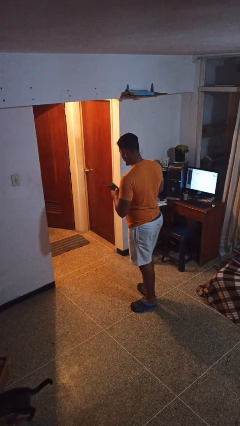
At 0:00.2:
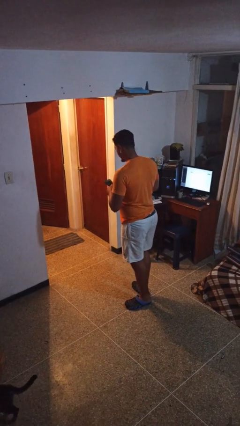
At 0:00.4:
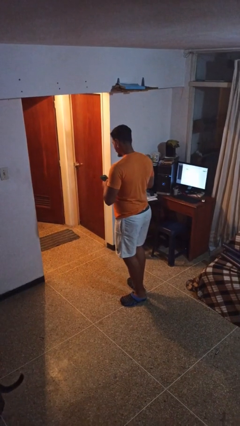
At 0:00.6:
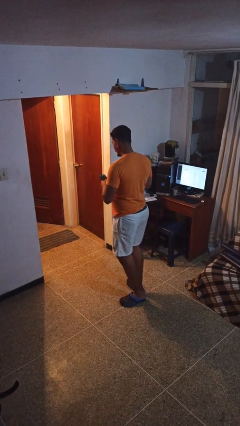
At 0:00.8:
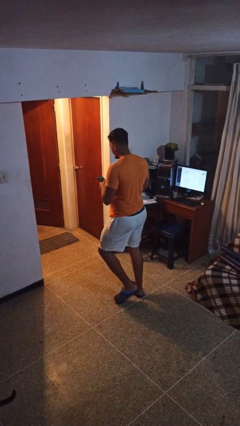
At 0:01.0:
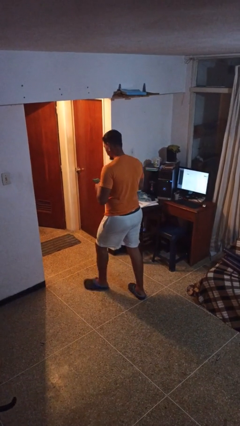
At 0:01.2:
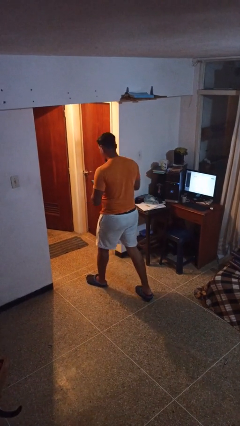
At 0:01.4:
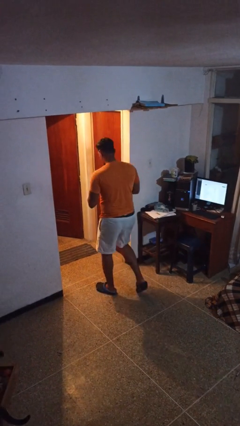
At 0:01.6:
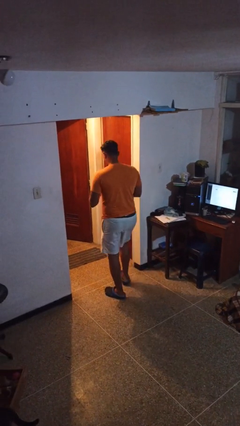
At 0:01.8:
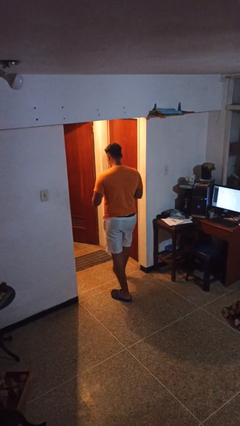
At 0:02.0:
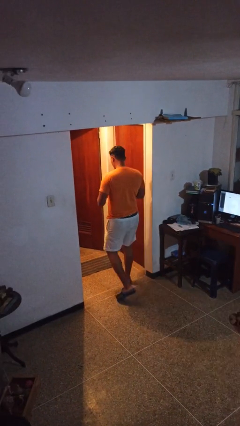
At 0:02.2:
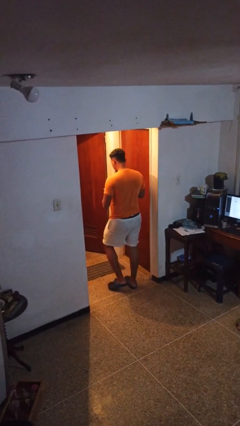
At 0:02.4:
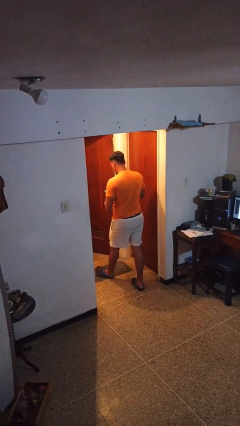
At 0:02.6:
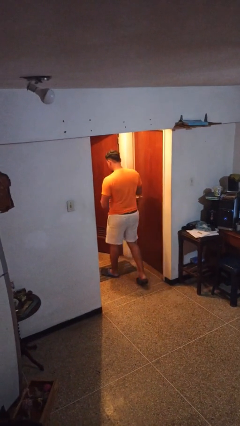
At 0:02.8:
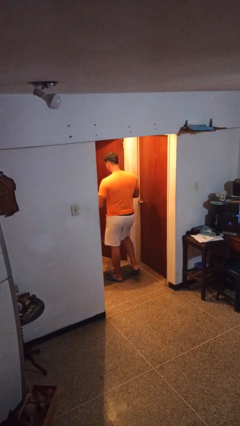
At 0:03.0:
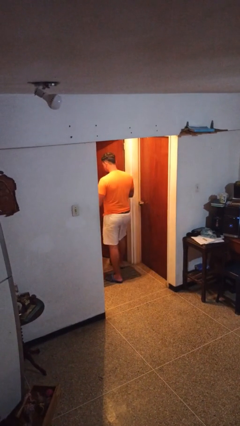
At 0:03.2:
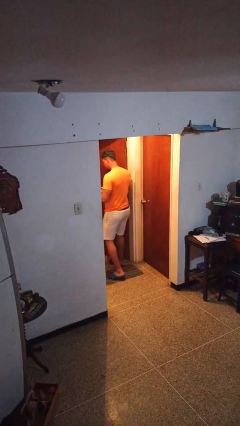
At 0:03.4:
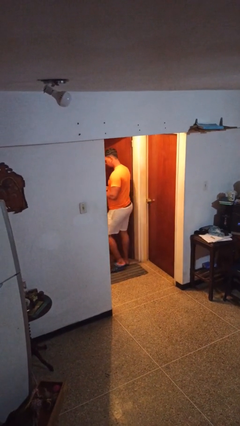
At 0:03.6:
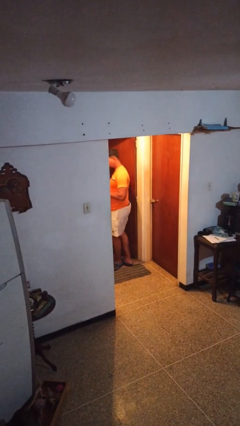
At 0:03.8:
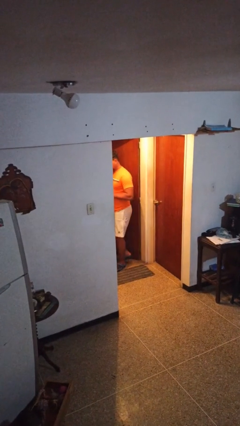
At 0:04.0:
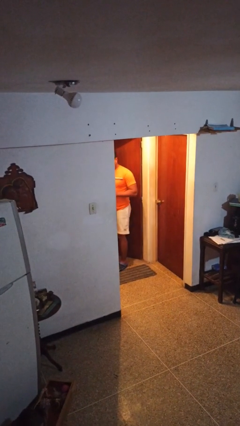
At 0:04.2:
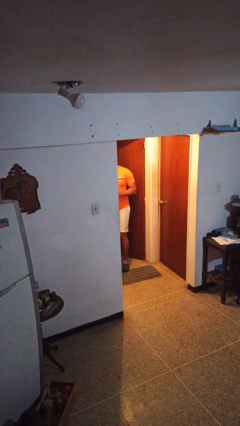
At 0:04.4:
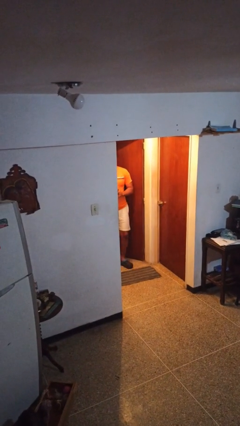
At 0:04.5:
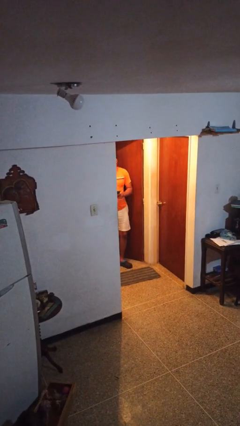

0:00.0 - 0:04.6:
person exits scene through structure

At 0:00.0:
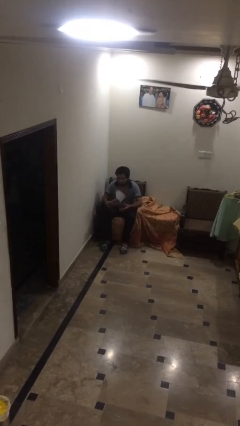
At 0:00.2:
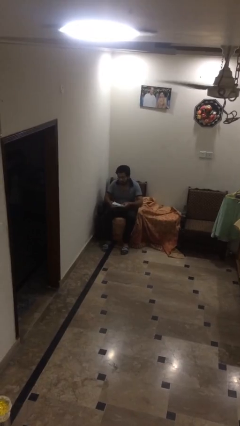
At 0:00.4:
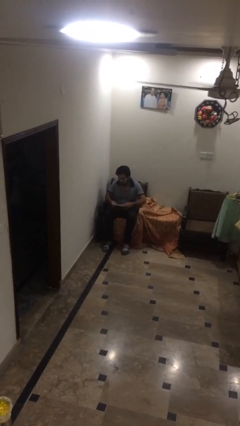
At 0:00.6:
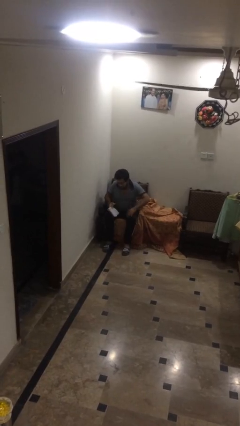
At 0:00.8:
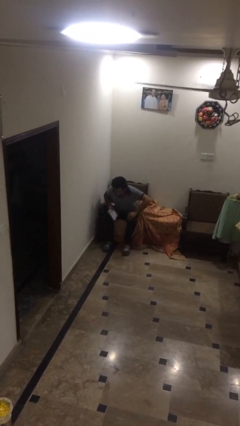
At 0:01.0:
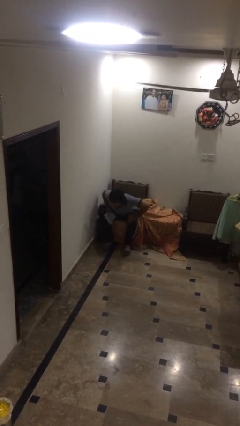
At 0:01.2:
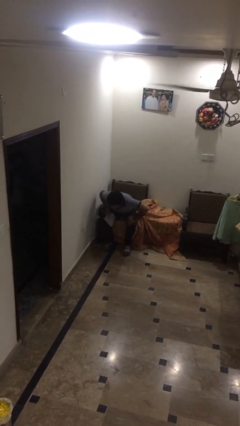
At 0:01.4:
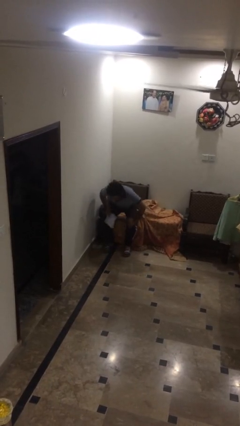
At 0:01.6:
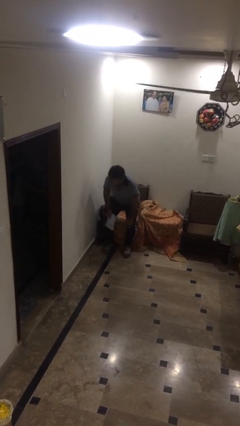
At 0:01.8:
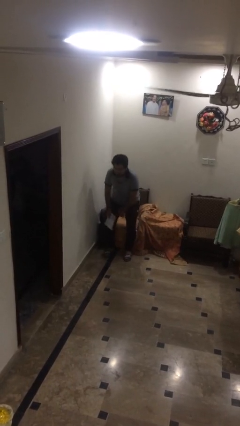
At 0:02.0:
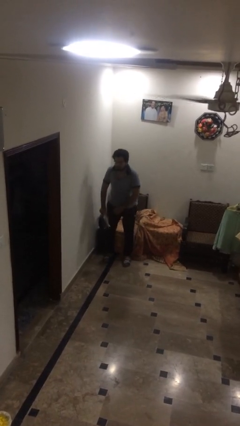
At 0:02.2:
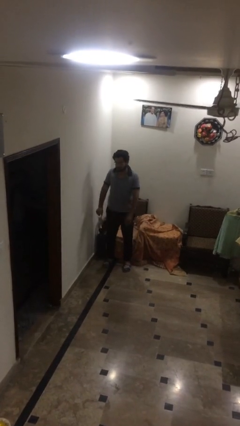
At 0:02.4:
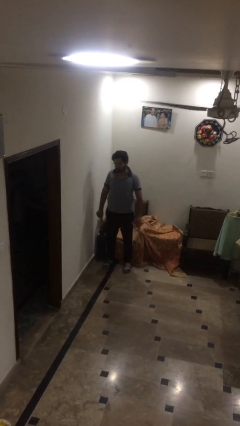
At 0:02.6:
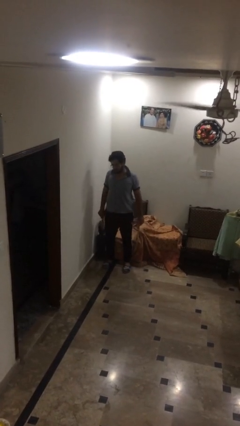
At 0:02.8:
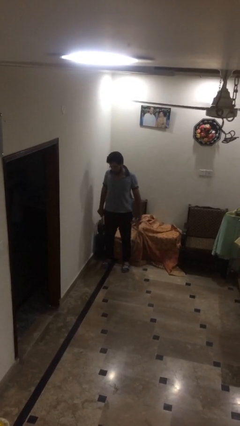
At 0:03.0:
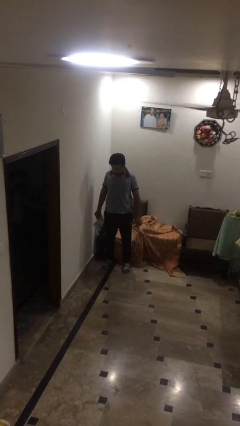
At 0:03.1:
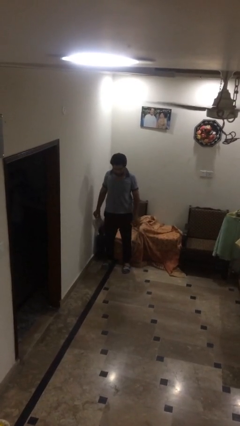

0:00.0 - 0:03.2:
person stands up

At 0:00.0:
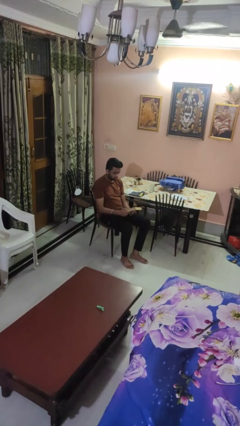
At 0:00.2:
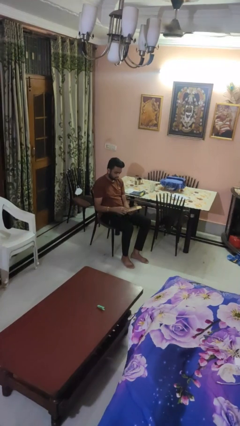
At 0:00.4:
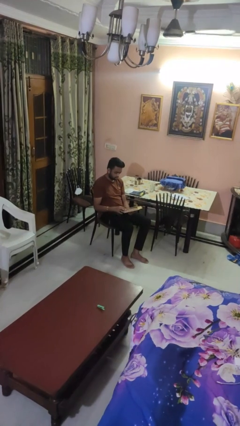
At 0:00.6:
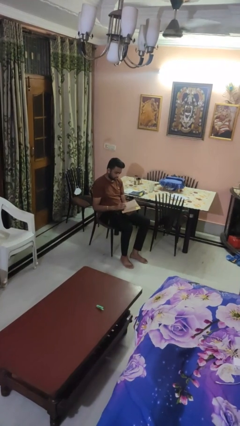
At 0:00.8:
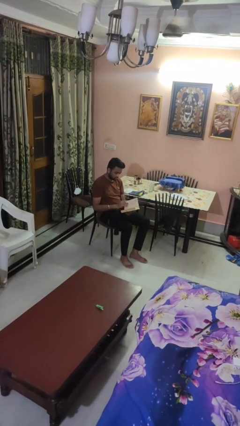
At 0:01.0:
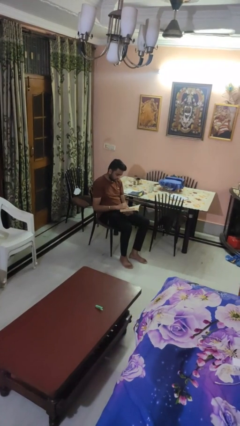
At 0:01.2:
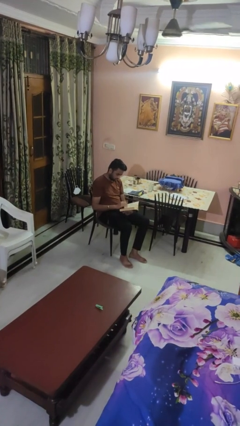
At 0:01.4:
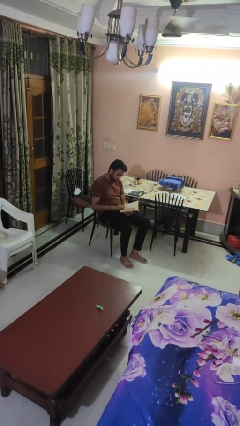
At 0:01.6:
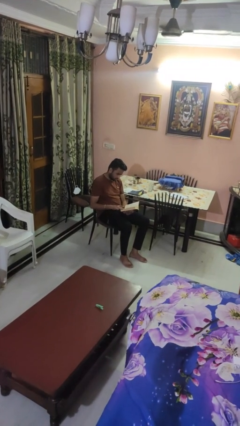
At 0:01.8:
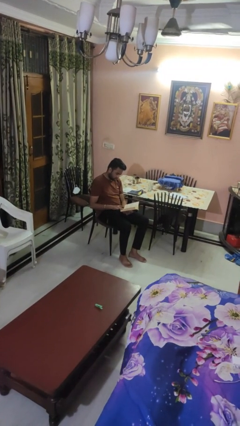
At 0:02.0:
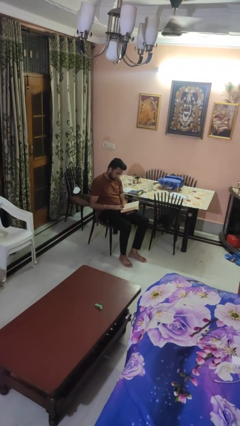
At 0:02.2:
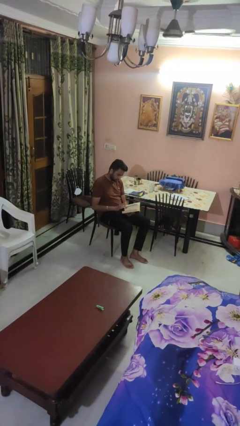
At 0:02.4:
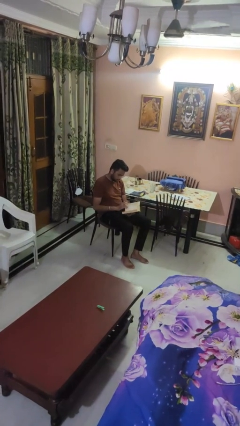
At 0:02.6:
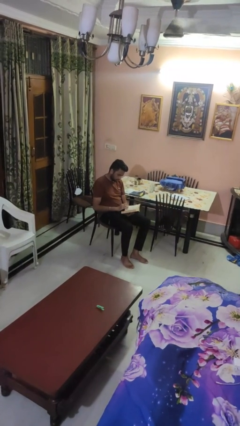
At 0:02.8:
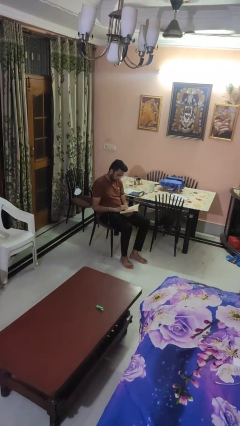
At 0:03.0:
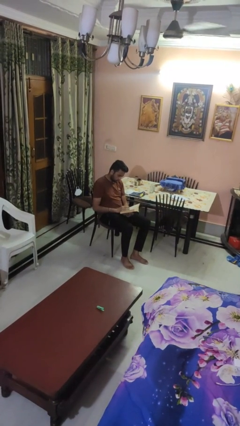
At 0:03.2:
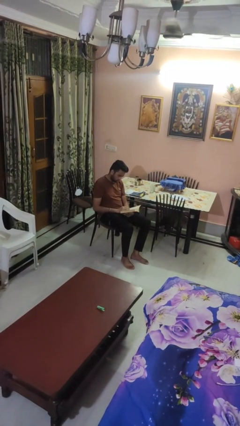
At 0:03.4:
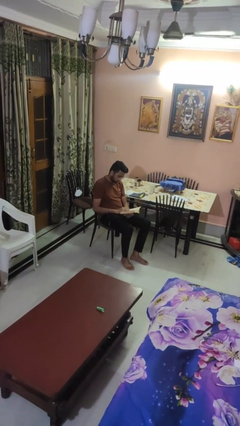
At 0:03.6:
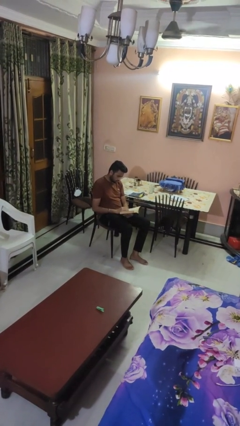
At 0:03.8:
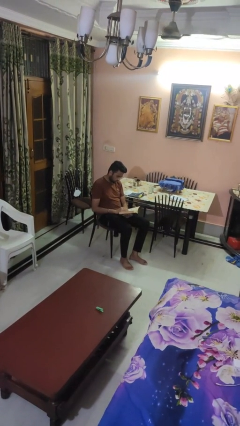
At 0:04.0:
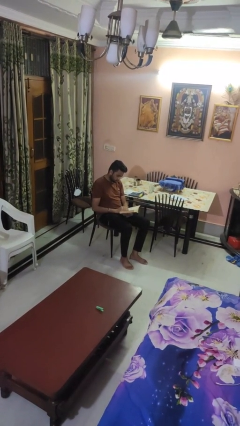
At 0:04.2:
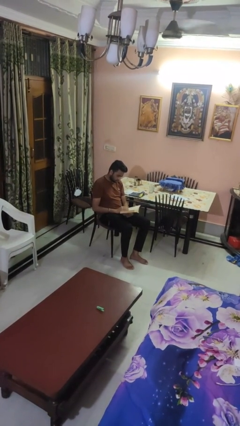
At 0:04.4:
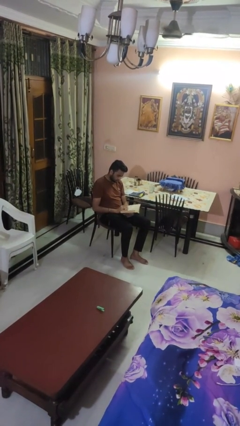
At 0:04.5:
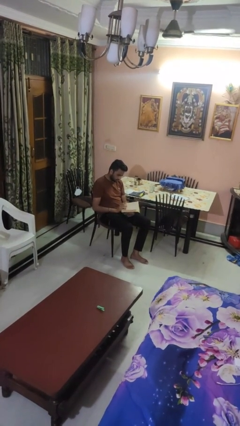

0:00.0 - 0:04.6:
person reads book

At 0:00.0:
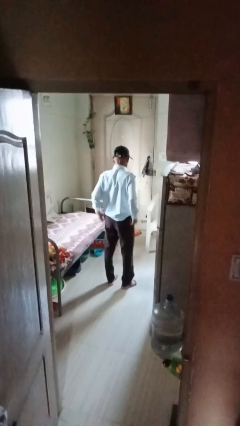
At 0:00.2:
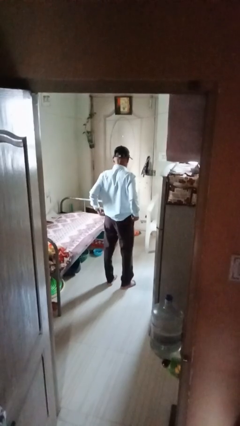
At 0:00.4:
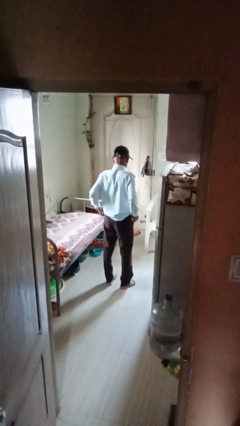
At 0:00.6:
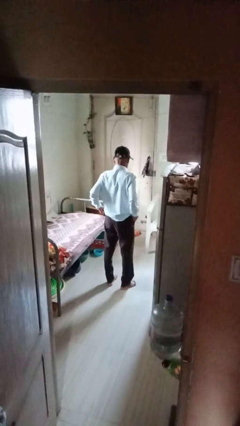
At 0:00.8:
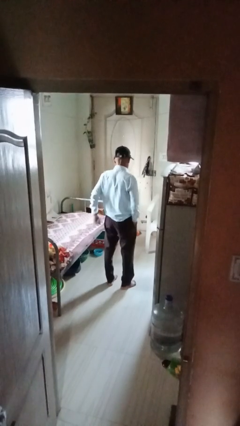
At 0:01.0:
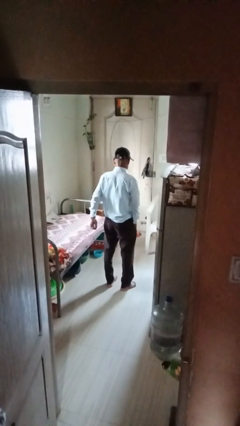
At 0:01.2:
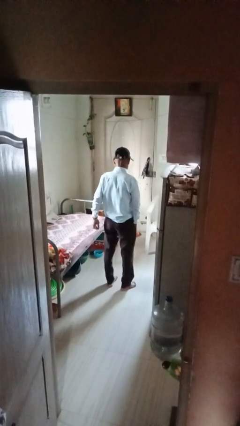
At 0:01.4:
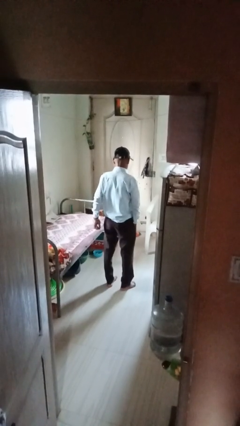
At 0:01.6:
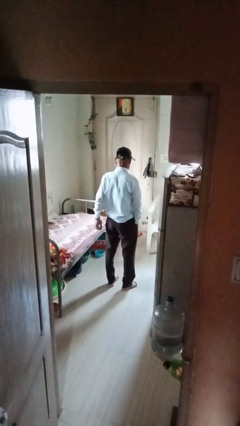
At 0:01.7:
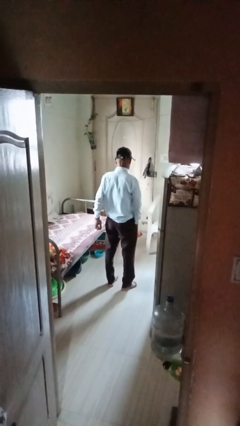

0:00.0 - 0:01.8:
person puts hands in back pockets

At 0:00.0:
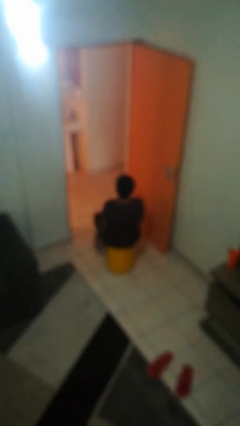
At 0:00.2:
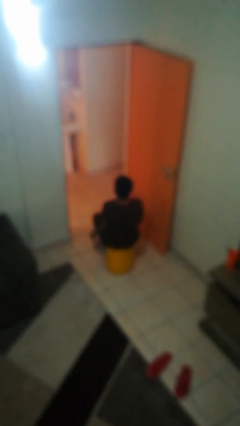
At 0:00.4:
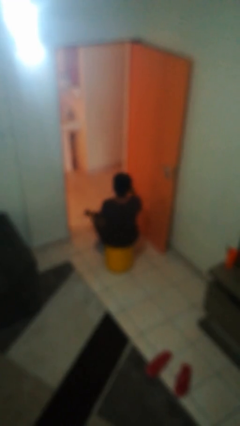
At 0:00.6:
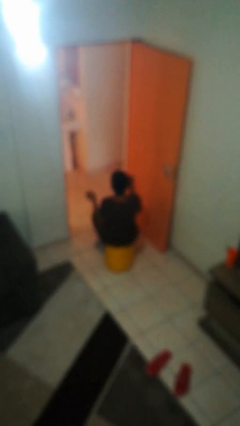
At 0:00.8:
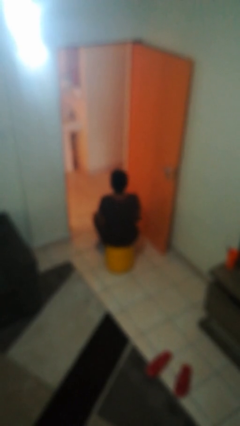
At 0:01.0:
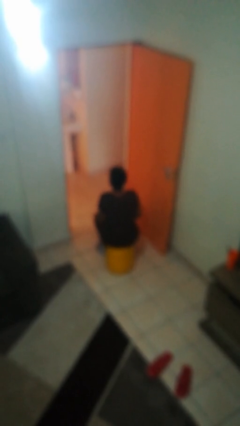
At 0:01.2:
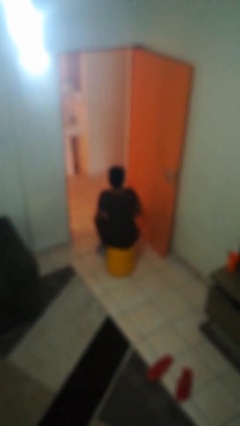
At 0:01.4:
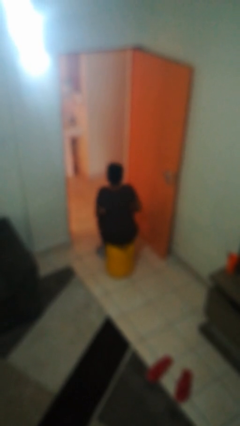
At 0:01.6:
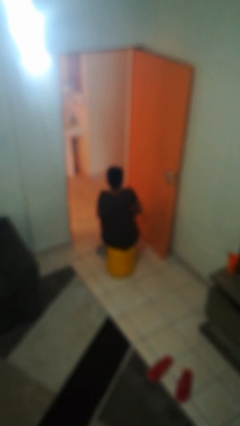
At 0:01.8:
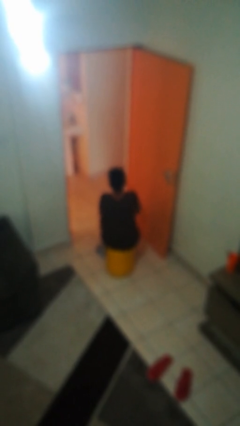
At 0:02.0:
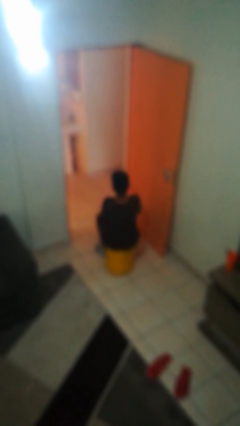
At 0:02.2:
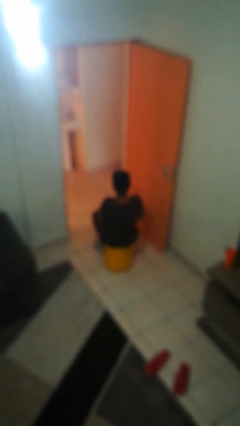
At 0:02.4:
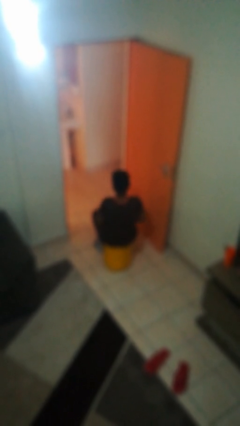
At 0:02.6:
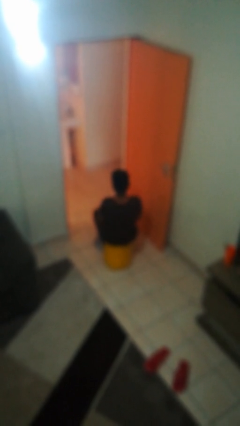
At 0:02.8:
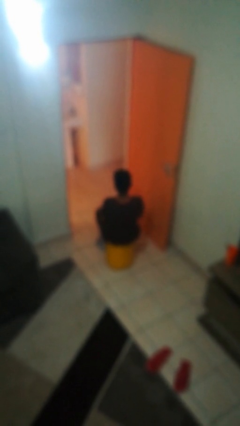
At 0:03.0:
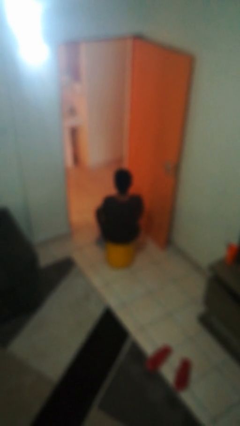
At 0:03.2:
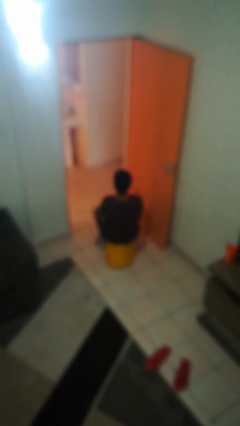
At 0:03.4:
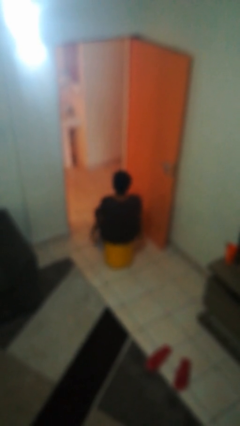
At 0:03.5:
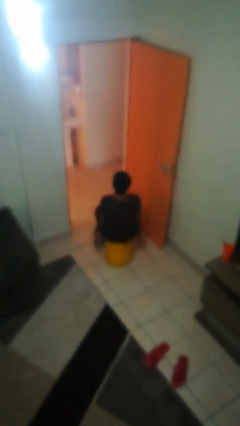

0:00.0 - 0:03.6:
person slaps hands on thighs
